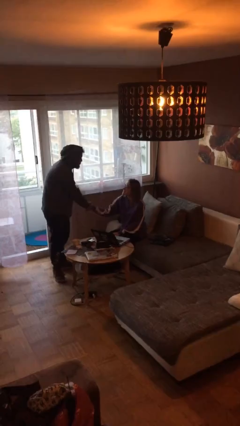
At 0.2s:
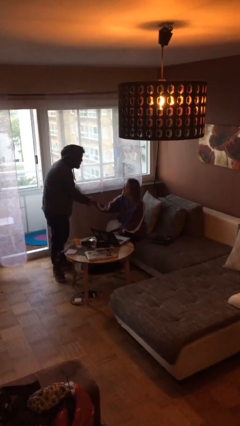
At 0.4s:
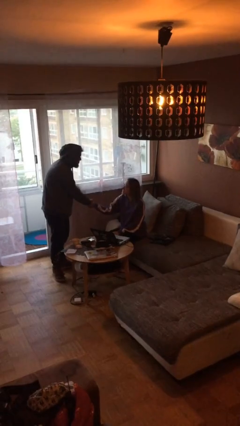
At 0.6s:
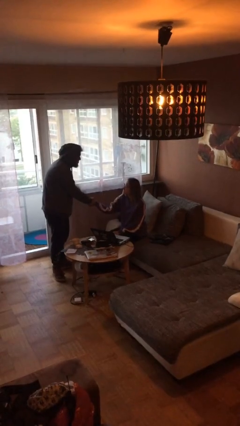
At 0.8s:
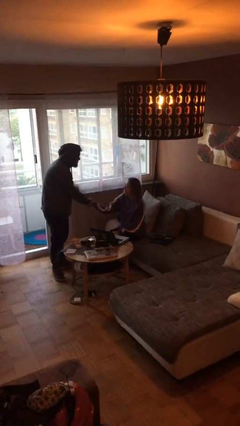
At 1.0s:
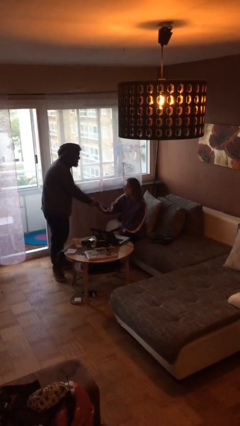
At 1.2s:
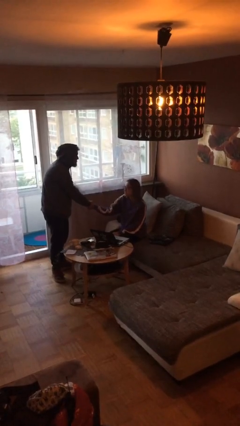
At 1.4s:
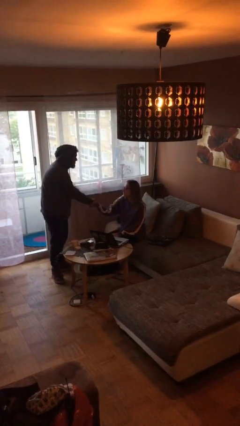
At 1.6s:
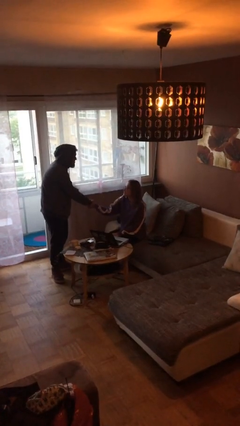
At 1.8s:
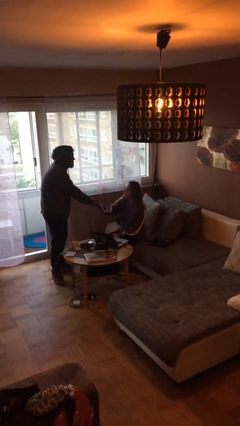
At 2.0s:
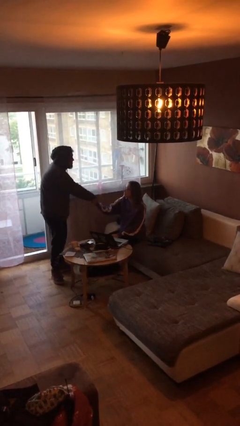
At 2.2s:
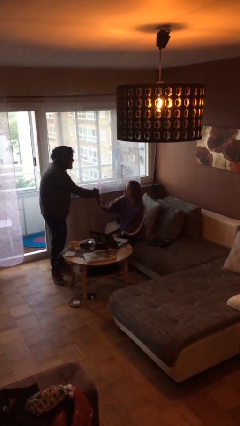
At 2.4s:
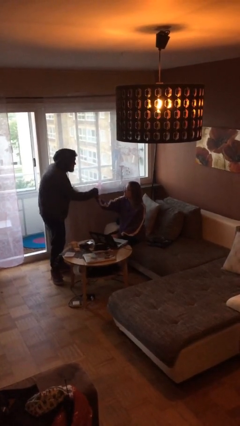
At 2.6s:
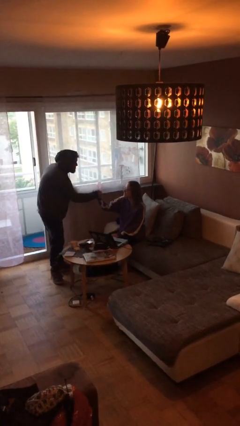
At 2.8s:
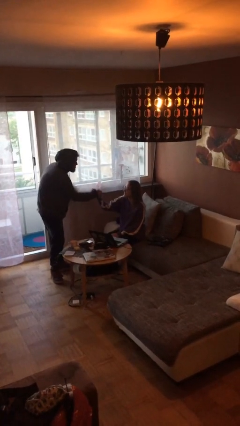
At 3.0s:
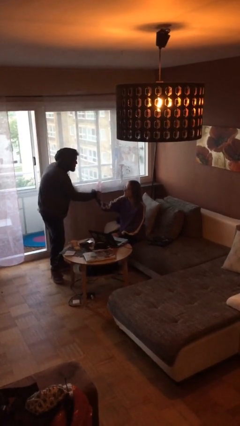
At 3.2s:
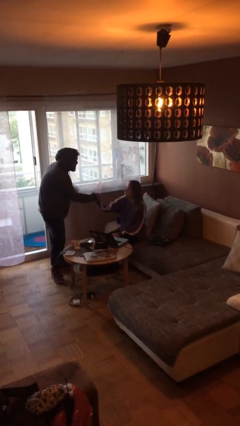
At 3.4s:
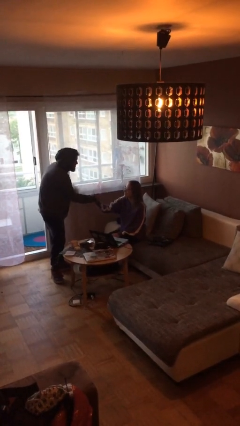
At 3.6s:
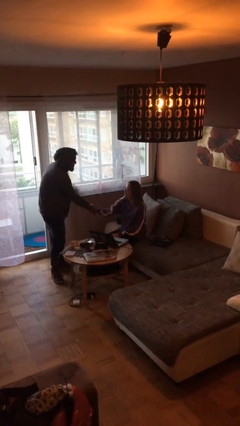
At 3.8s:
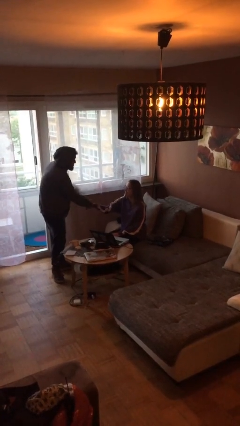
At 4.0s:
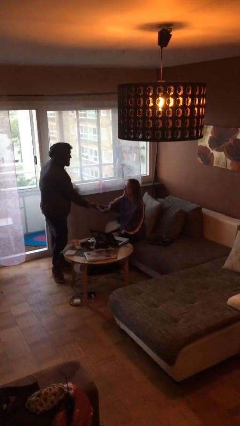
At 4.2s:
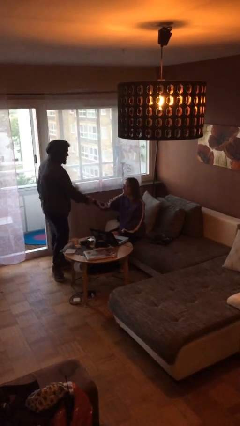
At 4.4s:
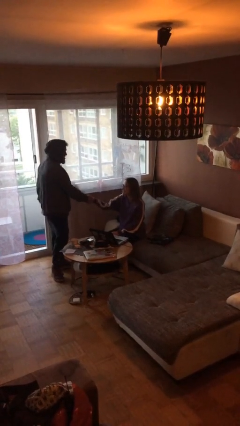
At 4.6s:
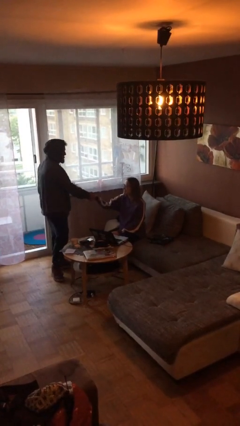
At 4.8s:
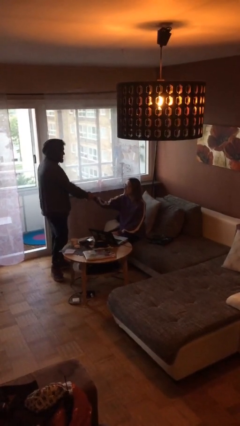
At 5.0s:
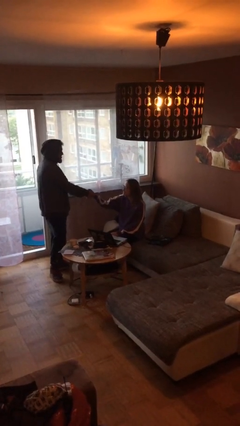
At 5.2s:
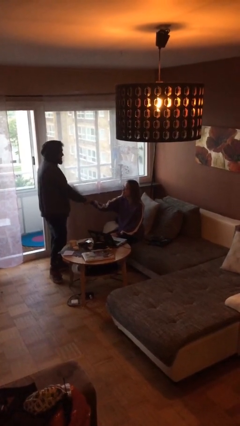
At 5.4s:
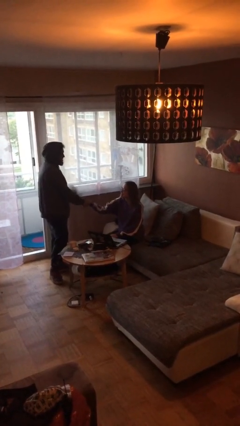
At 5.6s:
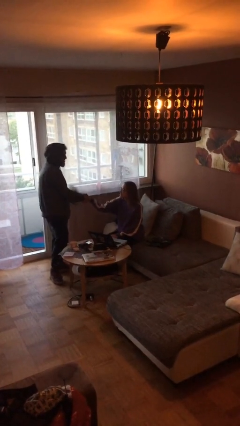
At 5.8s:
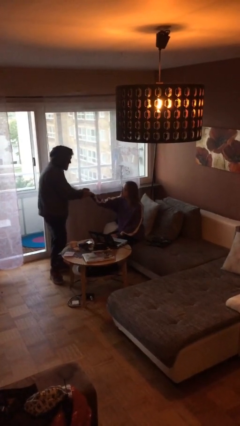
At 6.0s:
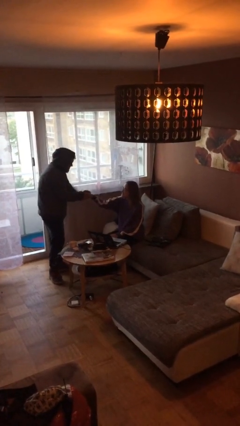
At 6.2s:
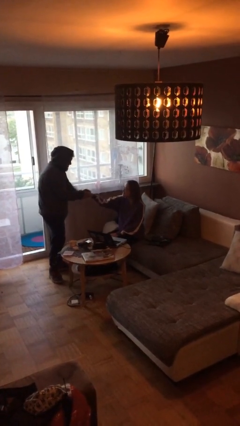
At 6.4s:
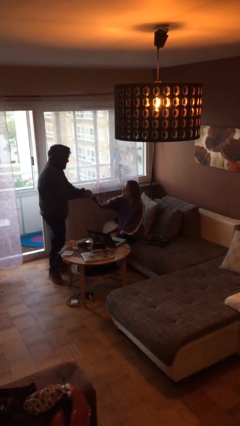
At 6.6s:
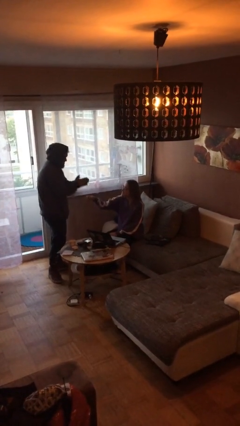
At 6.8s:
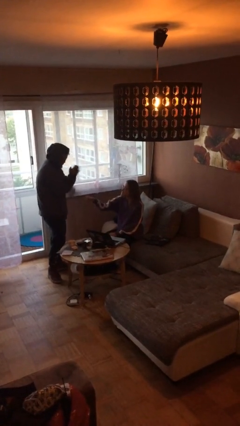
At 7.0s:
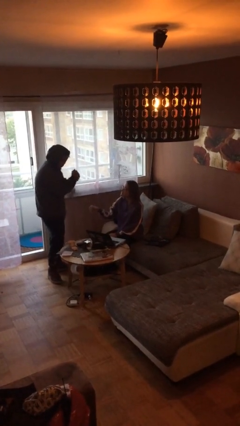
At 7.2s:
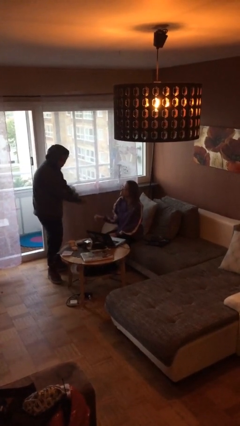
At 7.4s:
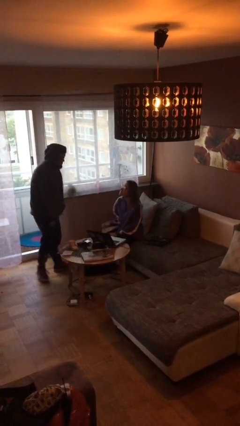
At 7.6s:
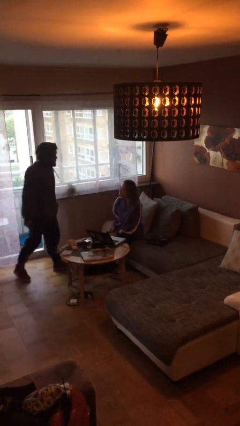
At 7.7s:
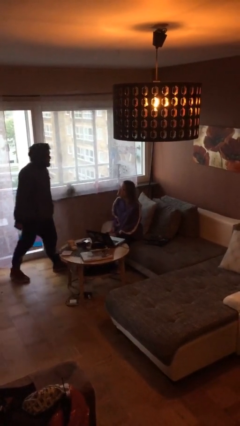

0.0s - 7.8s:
person shakes hand

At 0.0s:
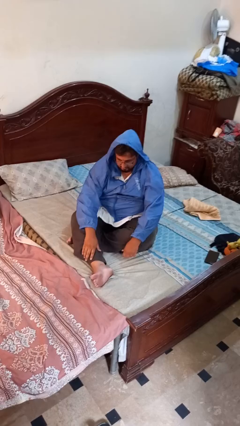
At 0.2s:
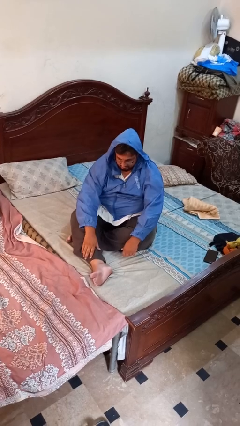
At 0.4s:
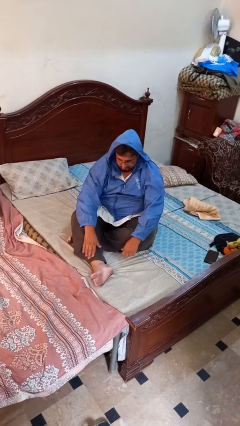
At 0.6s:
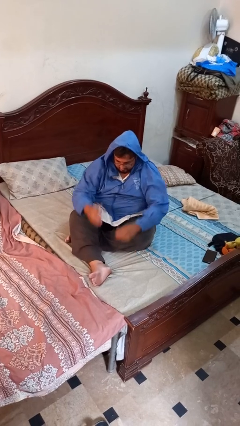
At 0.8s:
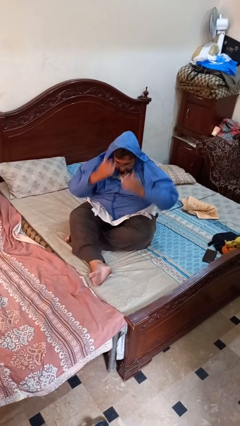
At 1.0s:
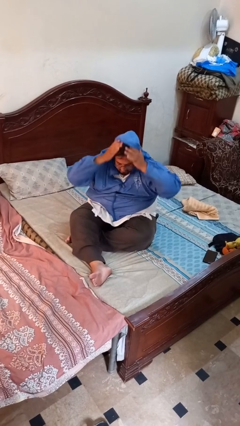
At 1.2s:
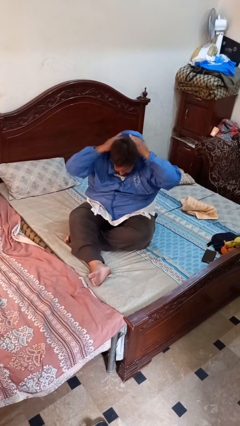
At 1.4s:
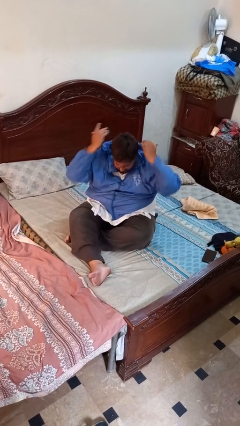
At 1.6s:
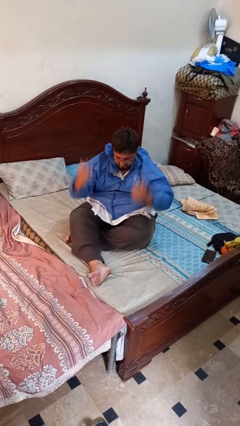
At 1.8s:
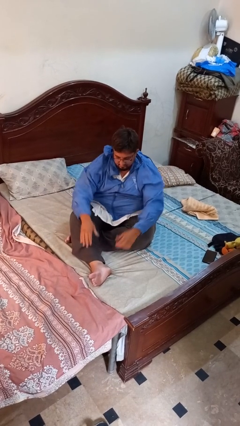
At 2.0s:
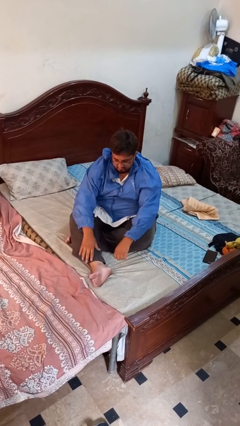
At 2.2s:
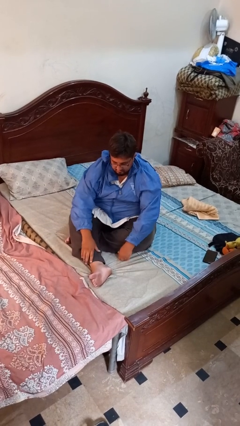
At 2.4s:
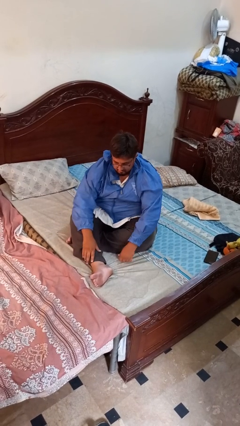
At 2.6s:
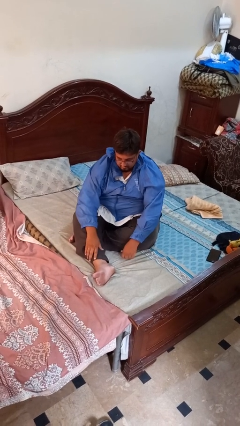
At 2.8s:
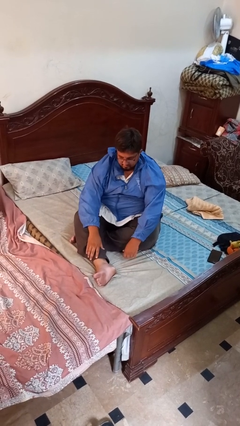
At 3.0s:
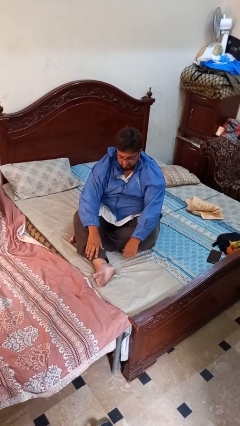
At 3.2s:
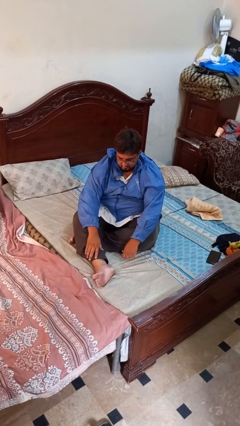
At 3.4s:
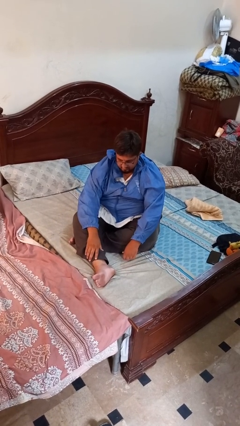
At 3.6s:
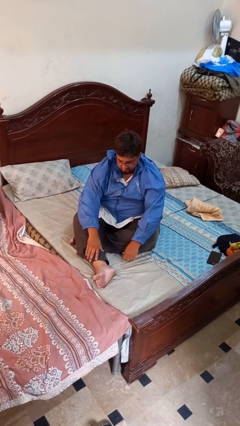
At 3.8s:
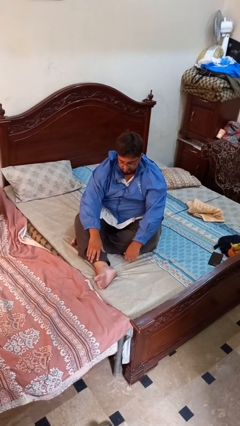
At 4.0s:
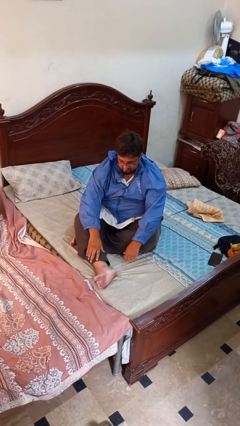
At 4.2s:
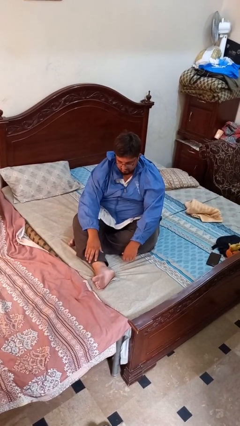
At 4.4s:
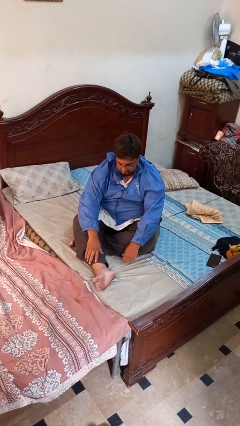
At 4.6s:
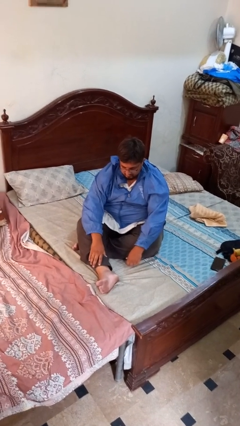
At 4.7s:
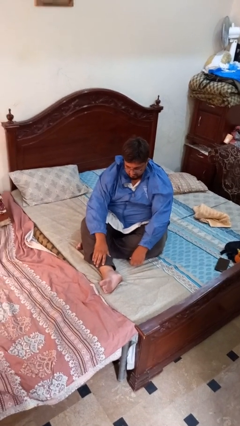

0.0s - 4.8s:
person takes off hoodie

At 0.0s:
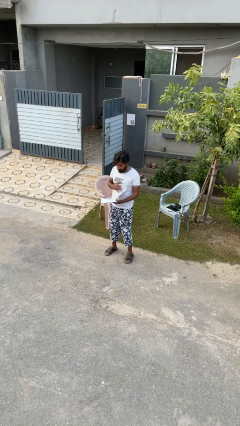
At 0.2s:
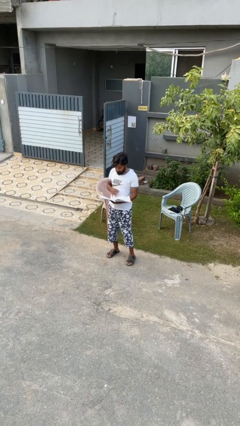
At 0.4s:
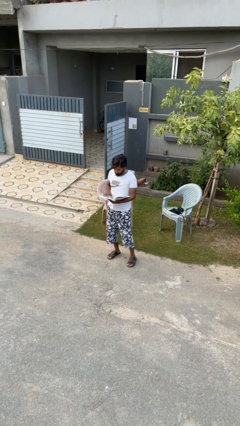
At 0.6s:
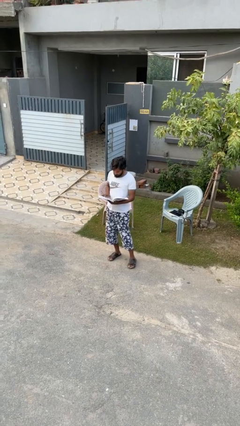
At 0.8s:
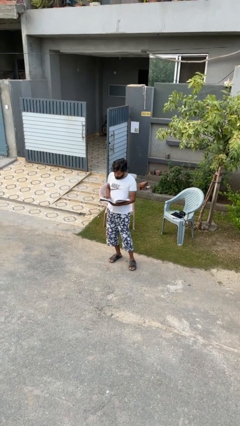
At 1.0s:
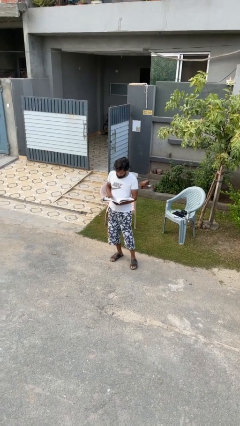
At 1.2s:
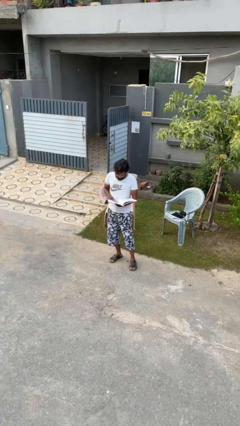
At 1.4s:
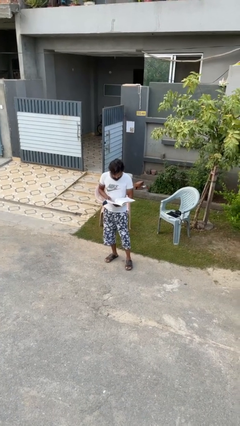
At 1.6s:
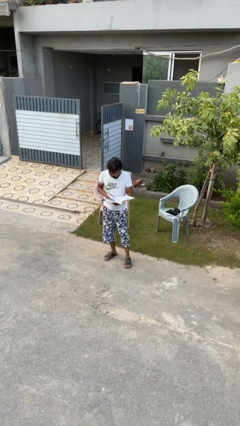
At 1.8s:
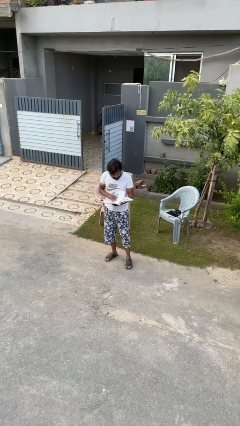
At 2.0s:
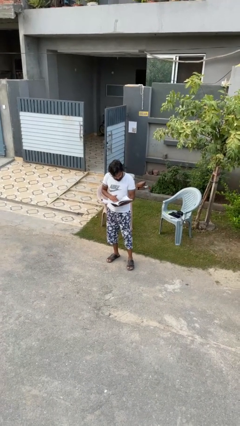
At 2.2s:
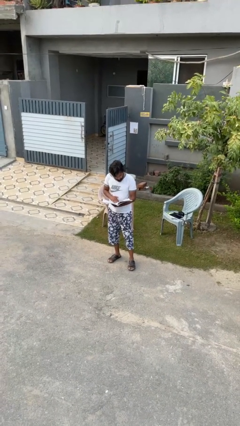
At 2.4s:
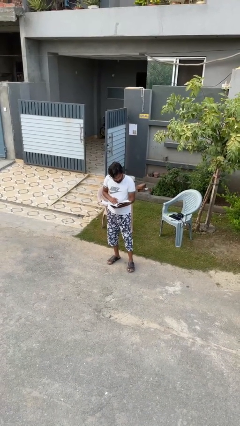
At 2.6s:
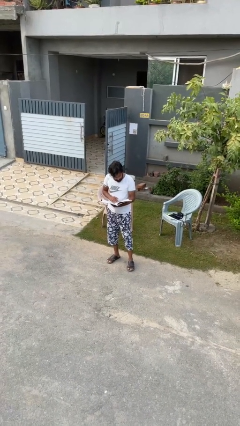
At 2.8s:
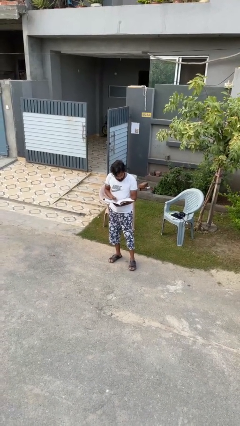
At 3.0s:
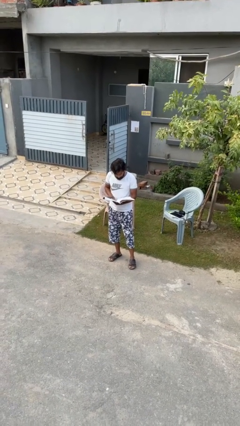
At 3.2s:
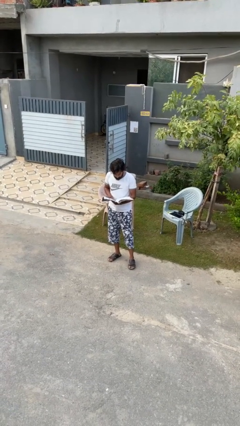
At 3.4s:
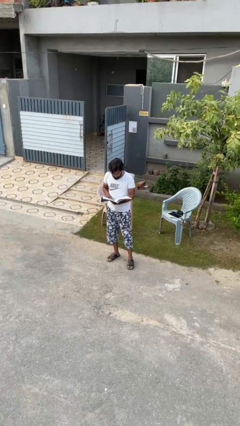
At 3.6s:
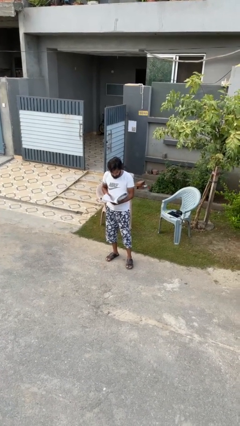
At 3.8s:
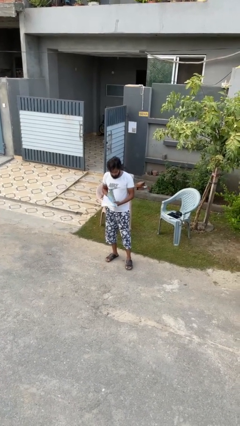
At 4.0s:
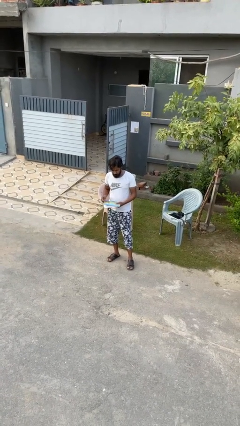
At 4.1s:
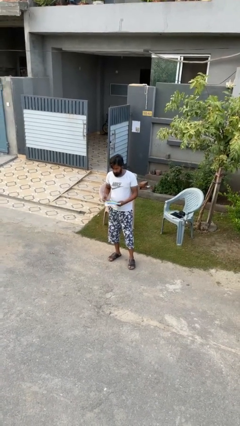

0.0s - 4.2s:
person reads book

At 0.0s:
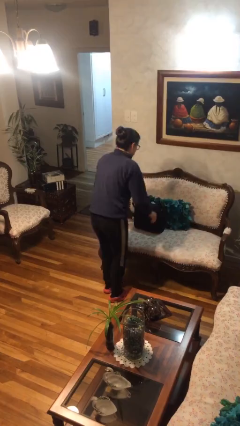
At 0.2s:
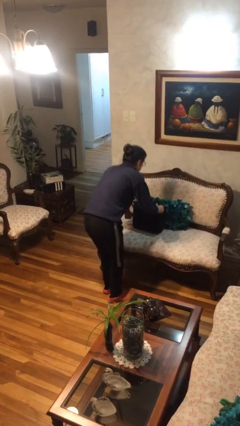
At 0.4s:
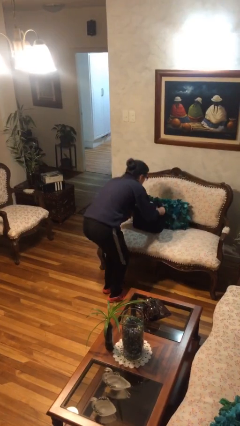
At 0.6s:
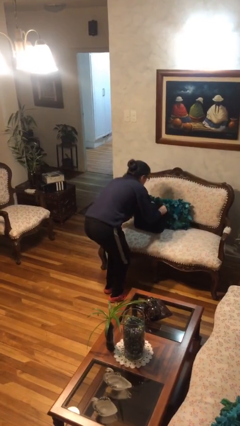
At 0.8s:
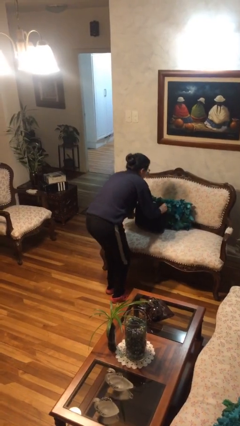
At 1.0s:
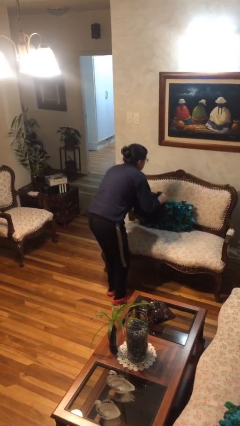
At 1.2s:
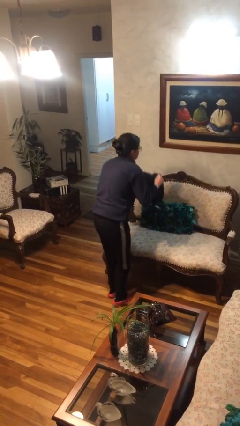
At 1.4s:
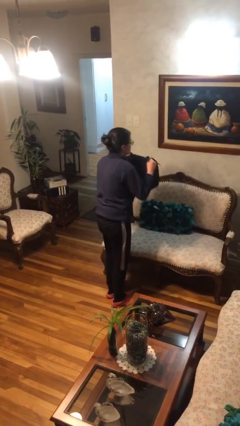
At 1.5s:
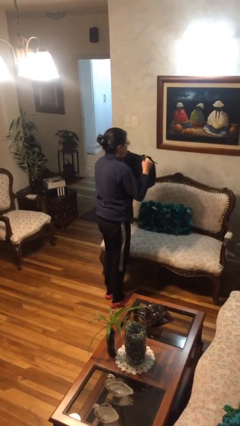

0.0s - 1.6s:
person picks up object from couch
